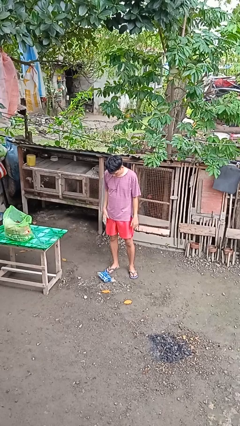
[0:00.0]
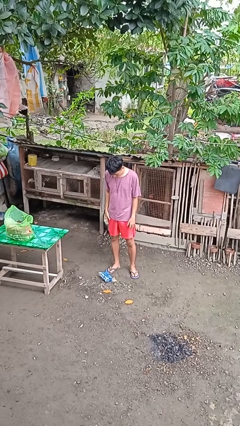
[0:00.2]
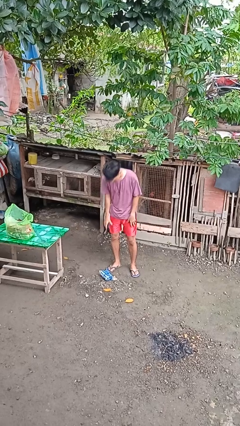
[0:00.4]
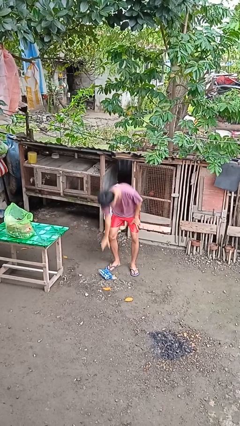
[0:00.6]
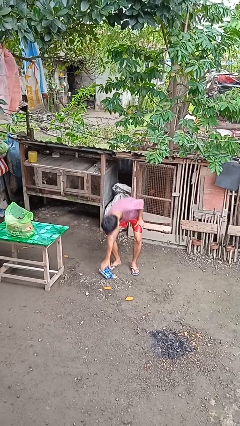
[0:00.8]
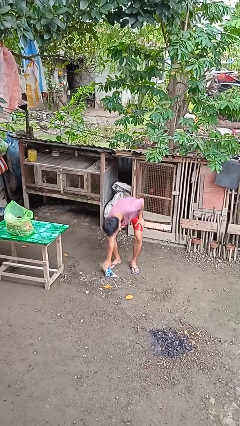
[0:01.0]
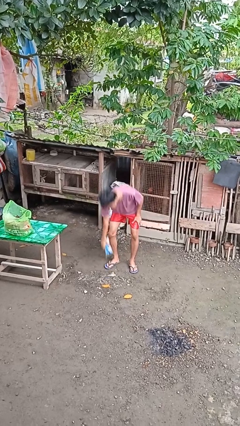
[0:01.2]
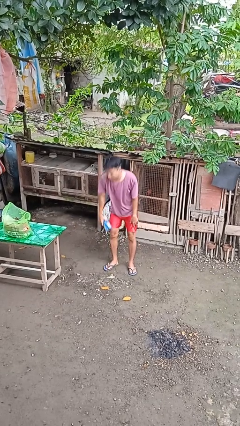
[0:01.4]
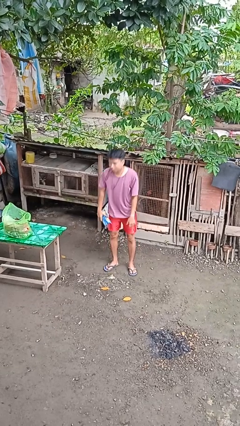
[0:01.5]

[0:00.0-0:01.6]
person picks up object from floor

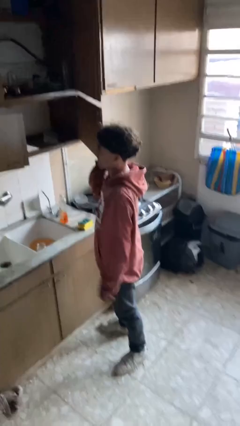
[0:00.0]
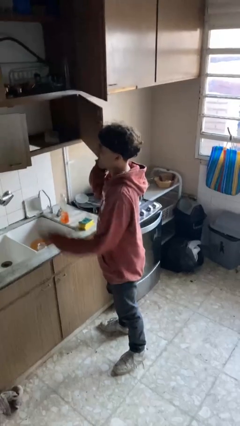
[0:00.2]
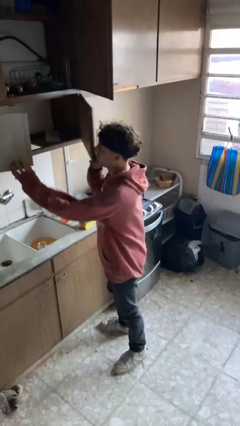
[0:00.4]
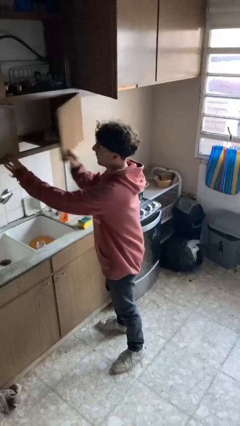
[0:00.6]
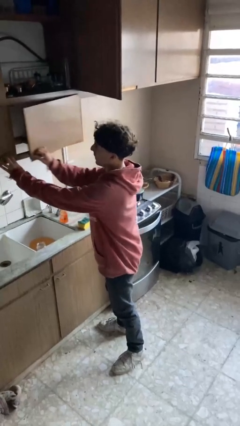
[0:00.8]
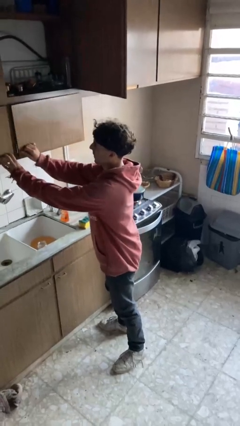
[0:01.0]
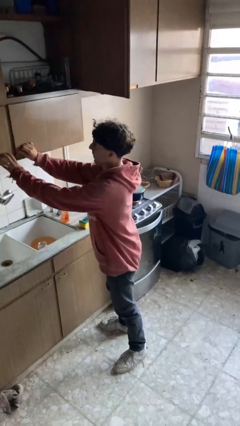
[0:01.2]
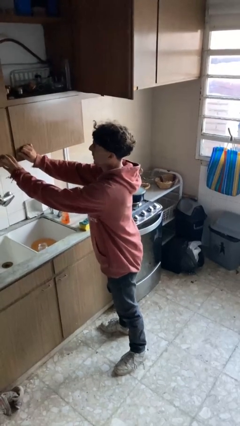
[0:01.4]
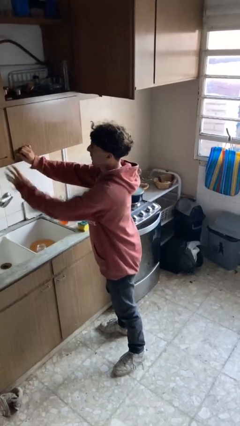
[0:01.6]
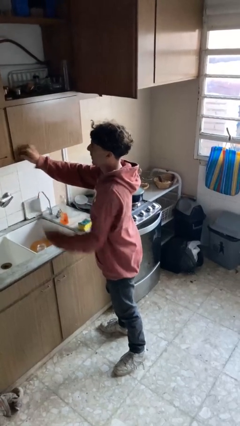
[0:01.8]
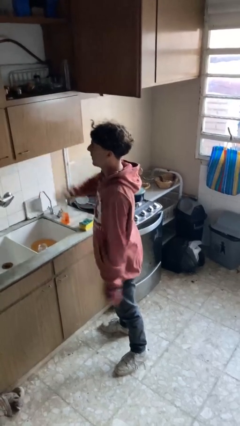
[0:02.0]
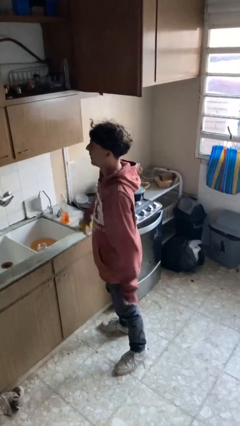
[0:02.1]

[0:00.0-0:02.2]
person closes cabinet

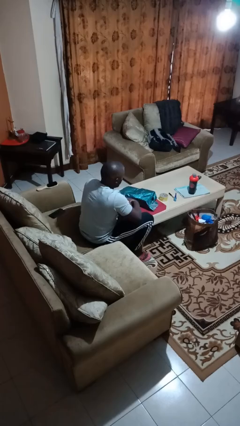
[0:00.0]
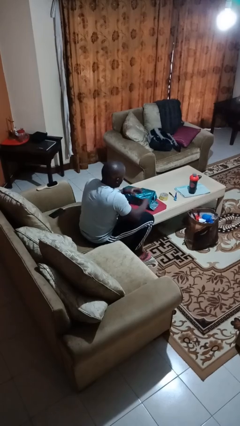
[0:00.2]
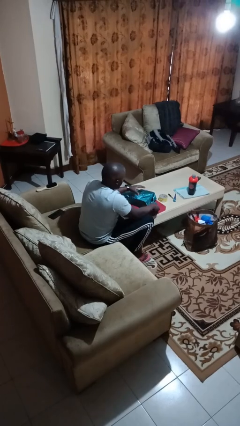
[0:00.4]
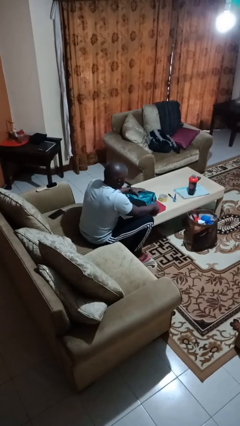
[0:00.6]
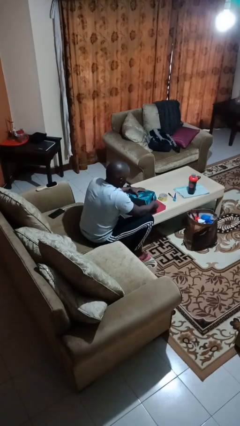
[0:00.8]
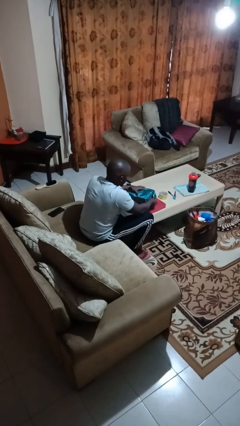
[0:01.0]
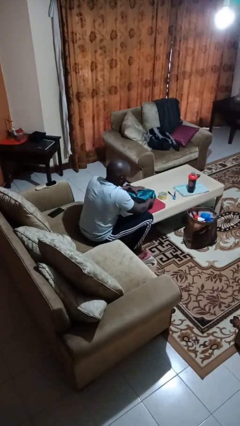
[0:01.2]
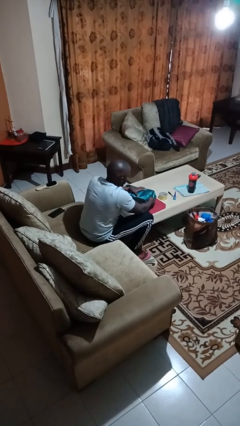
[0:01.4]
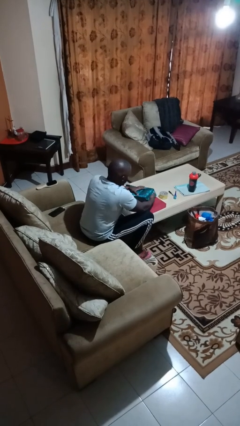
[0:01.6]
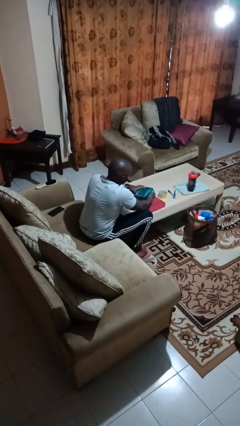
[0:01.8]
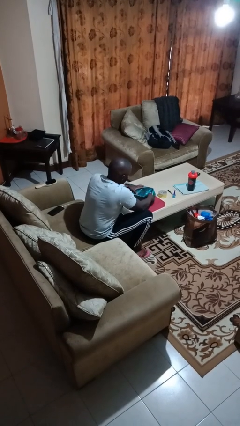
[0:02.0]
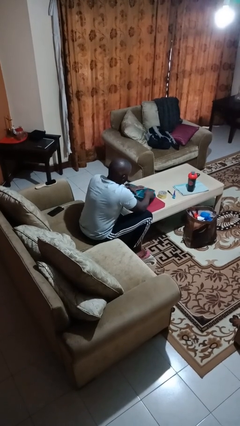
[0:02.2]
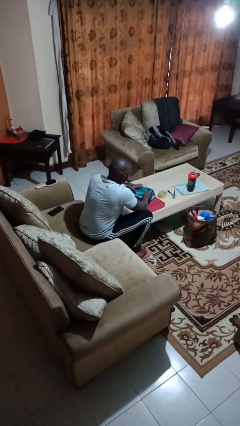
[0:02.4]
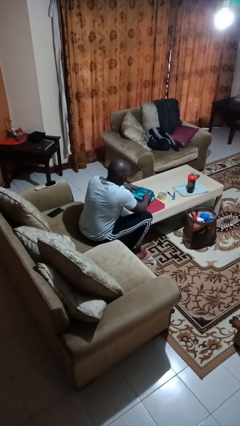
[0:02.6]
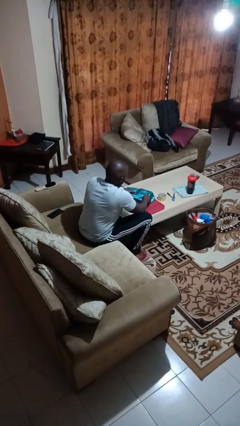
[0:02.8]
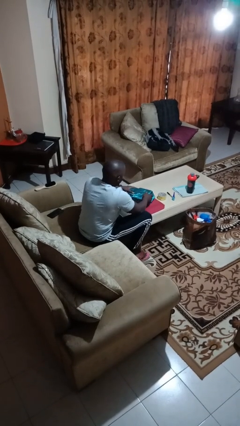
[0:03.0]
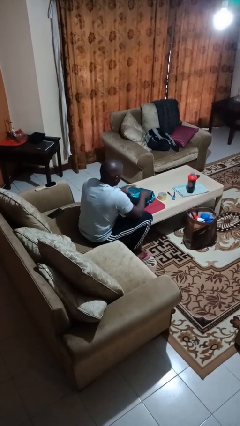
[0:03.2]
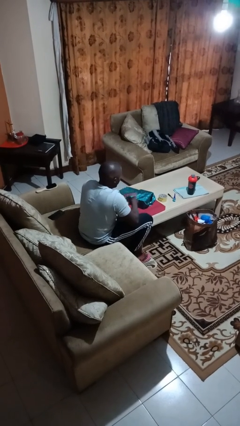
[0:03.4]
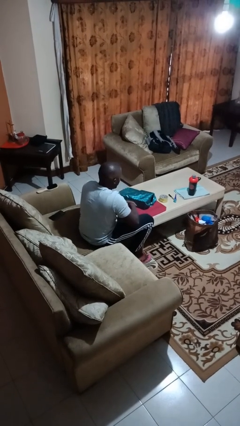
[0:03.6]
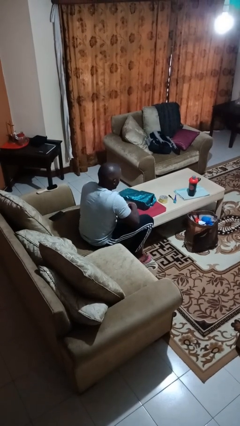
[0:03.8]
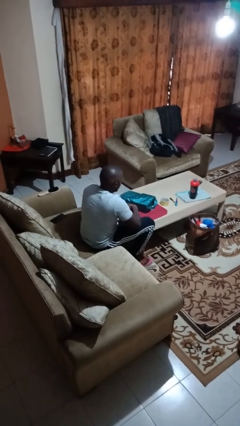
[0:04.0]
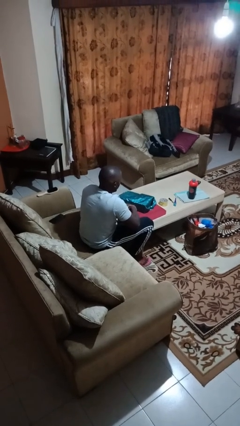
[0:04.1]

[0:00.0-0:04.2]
person wraps box

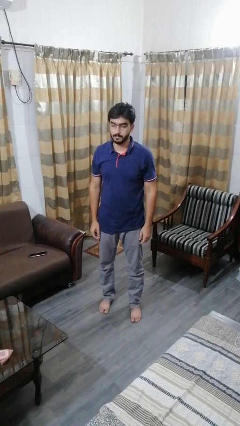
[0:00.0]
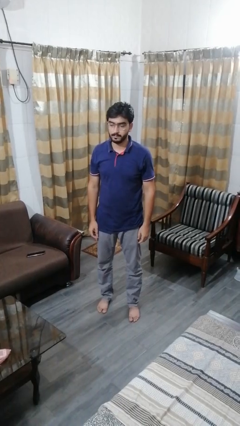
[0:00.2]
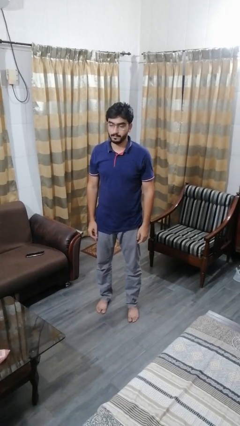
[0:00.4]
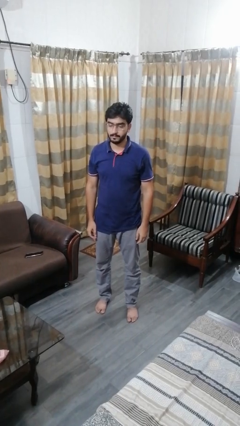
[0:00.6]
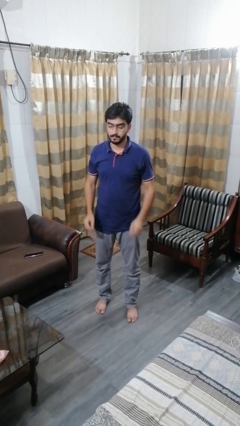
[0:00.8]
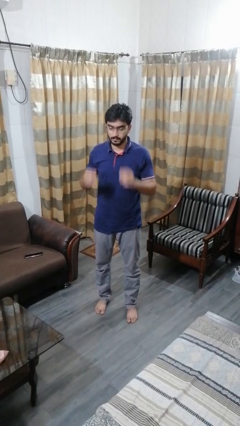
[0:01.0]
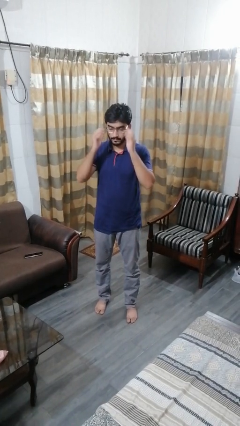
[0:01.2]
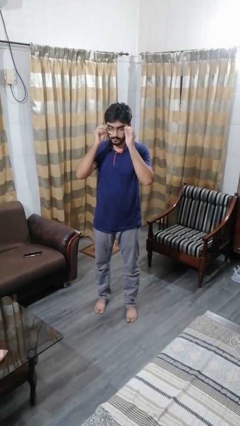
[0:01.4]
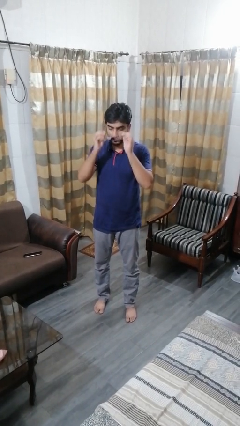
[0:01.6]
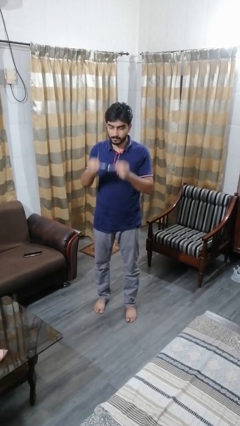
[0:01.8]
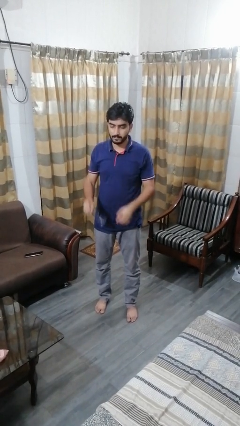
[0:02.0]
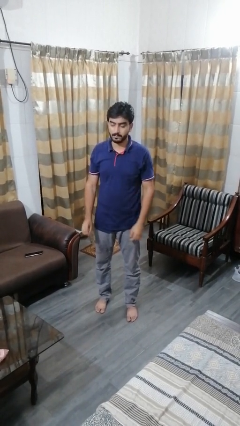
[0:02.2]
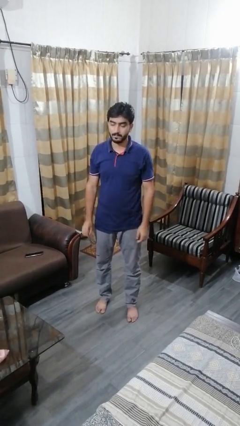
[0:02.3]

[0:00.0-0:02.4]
person takes off glasses

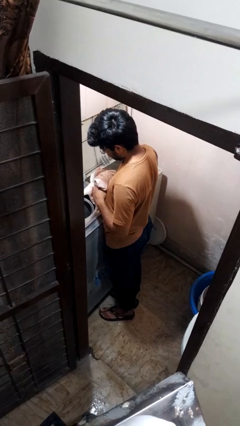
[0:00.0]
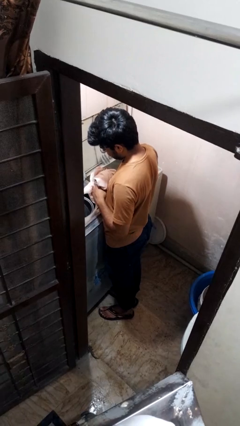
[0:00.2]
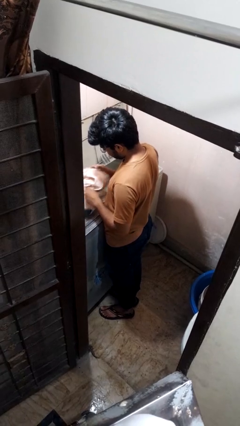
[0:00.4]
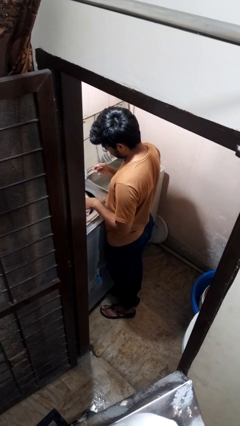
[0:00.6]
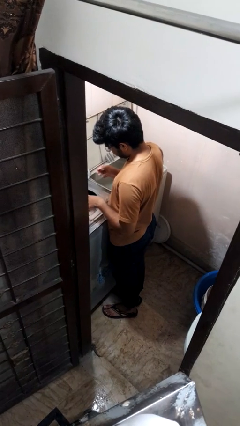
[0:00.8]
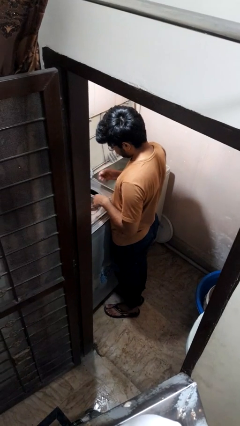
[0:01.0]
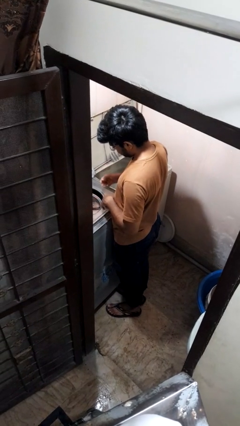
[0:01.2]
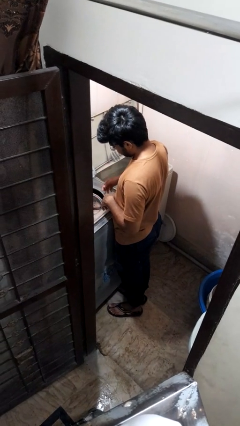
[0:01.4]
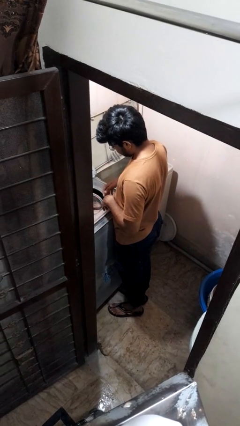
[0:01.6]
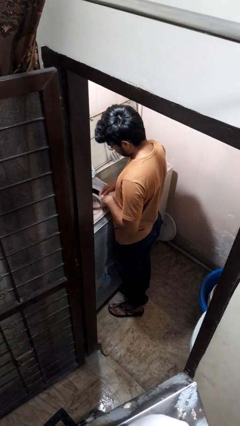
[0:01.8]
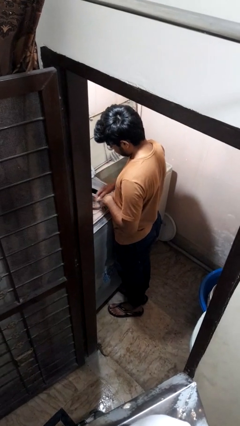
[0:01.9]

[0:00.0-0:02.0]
person loads dryer

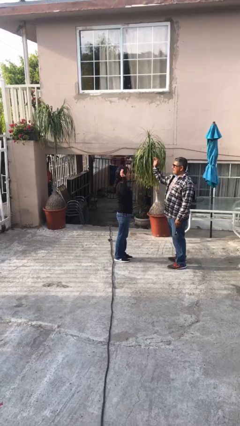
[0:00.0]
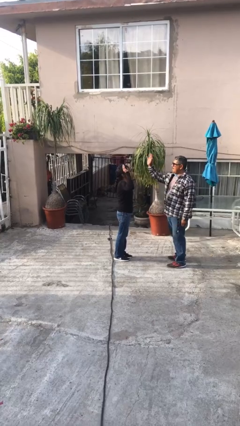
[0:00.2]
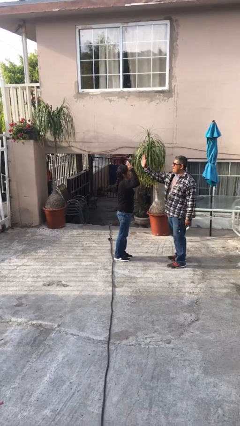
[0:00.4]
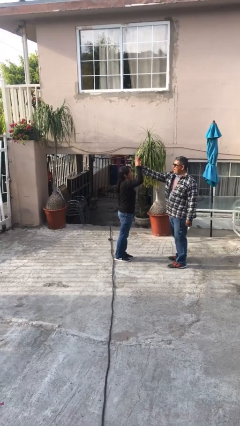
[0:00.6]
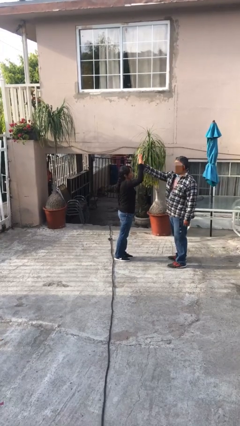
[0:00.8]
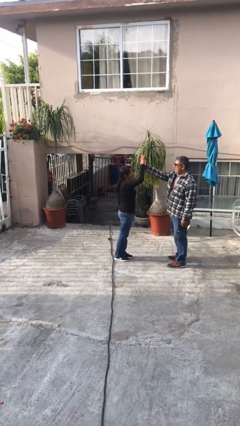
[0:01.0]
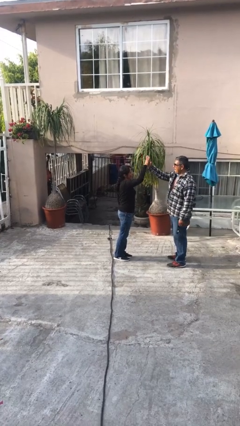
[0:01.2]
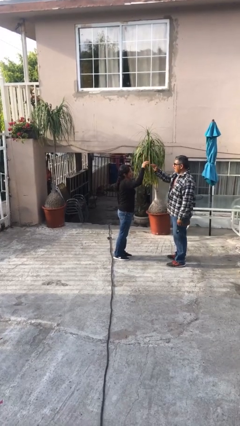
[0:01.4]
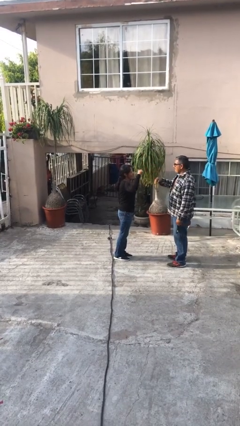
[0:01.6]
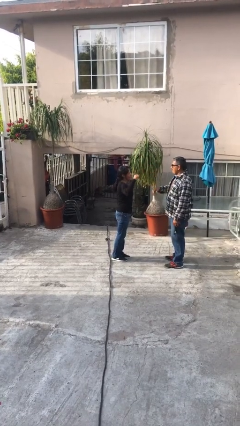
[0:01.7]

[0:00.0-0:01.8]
person highfives hand

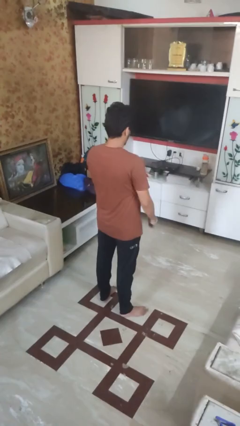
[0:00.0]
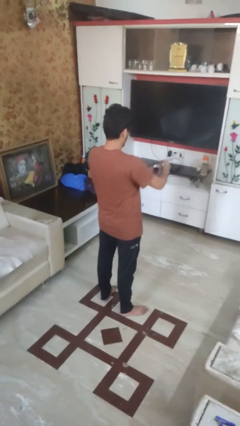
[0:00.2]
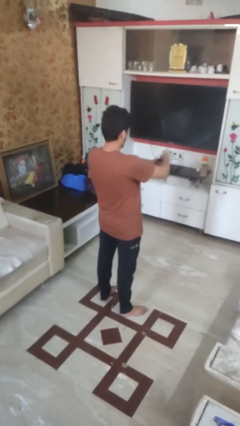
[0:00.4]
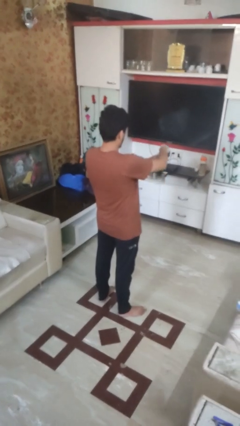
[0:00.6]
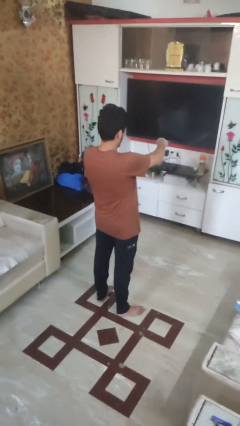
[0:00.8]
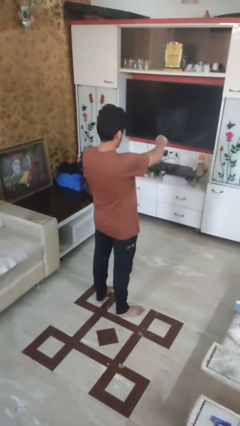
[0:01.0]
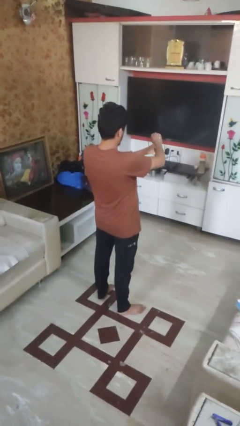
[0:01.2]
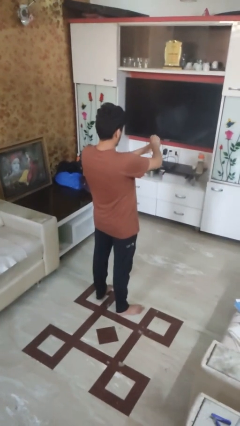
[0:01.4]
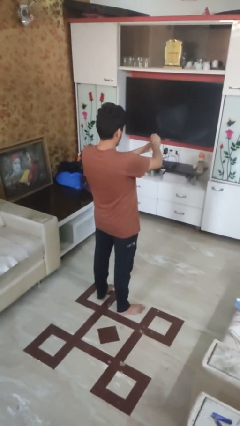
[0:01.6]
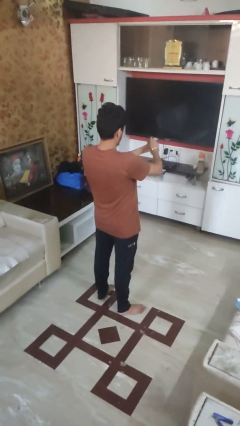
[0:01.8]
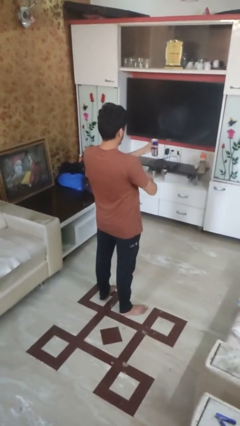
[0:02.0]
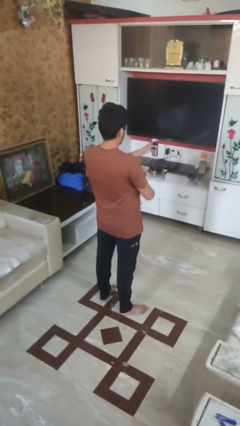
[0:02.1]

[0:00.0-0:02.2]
person opens beverage can
